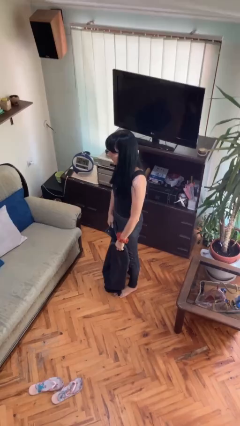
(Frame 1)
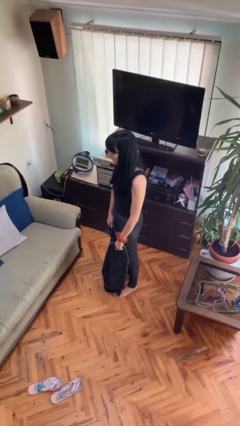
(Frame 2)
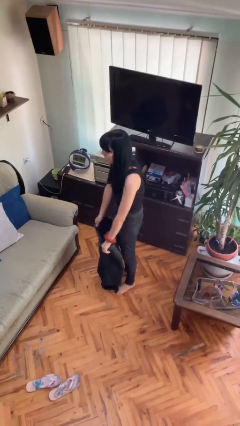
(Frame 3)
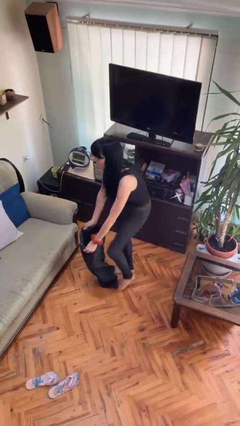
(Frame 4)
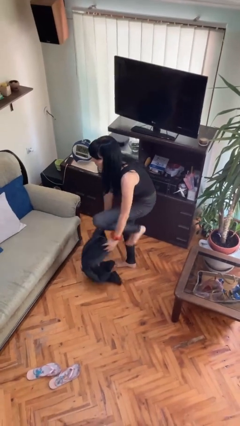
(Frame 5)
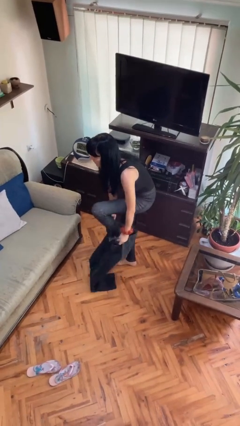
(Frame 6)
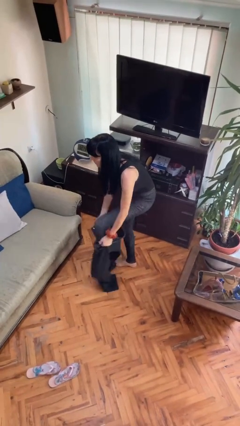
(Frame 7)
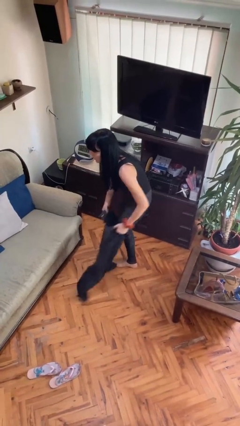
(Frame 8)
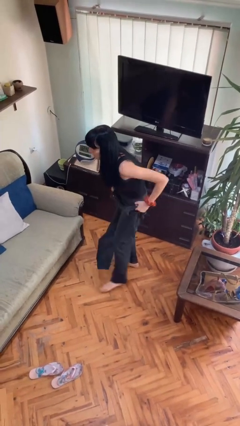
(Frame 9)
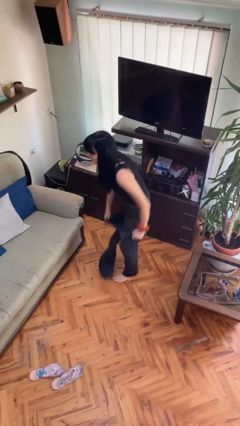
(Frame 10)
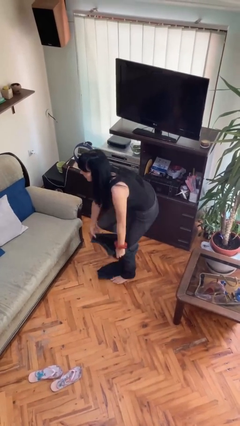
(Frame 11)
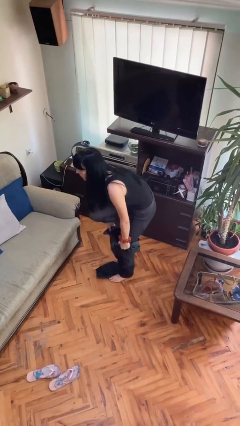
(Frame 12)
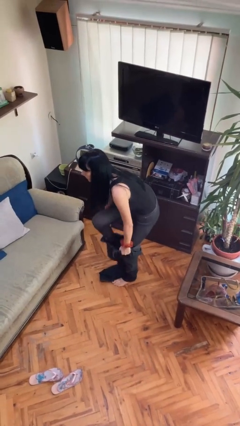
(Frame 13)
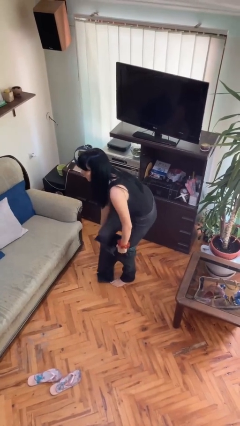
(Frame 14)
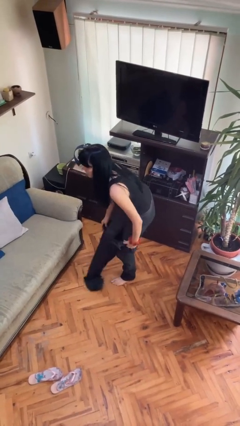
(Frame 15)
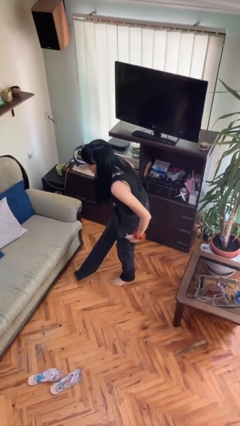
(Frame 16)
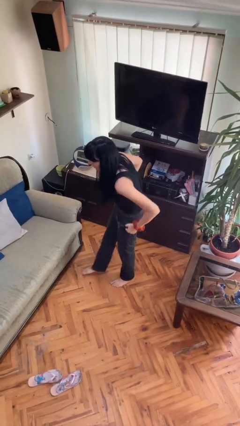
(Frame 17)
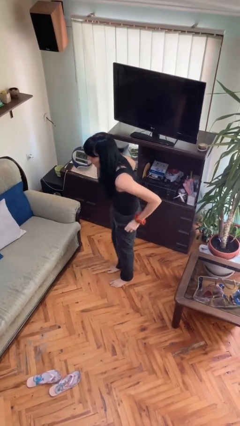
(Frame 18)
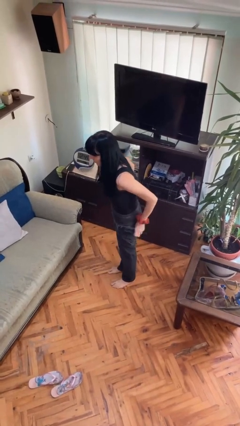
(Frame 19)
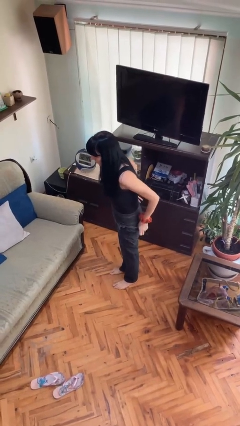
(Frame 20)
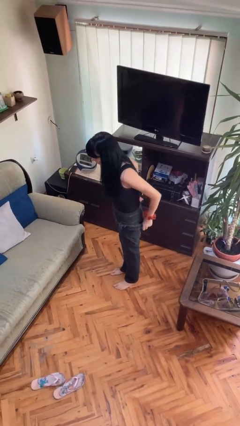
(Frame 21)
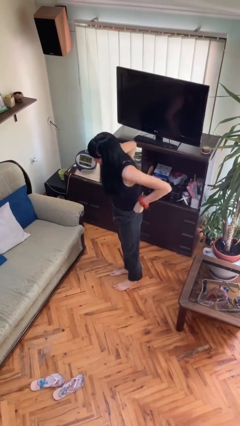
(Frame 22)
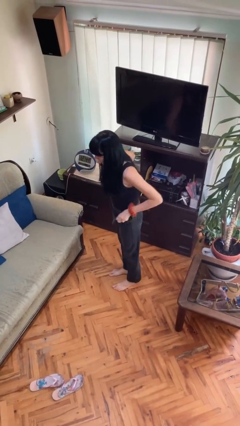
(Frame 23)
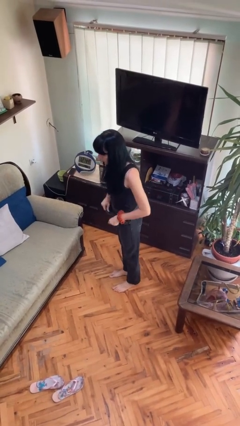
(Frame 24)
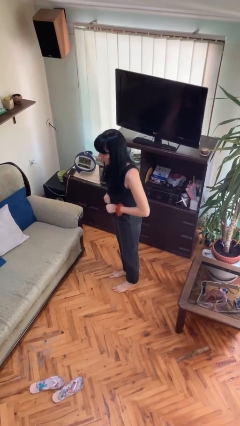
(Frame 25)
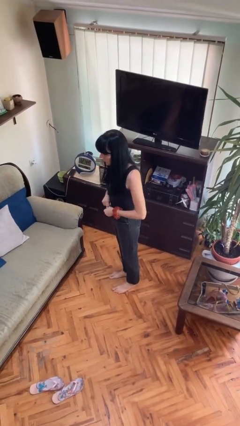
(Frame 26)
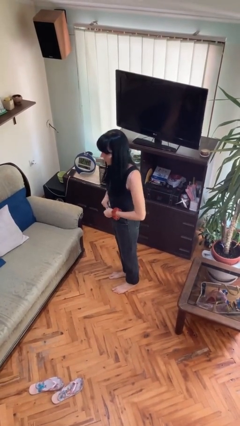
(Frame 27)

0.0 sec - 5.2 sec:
person puts on pants

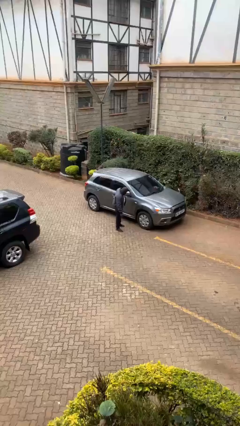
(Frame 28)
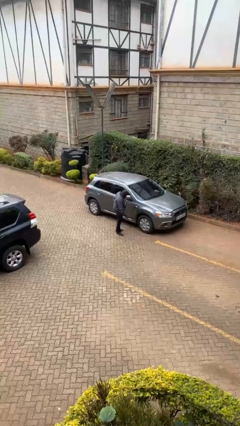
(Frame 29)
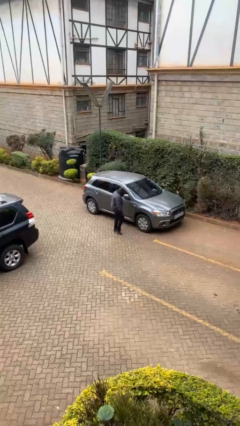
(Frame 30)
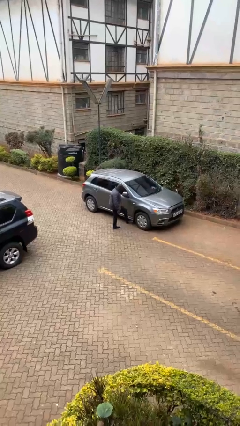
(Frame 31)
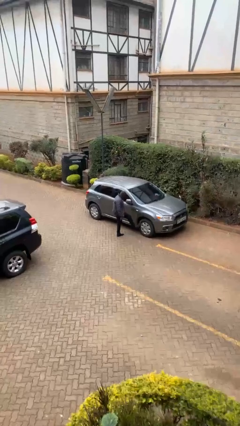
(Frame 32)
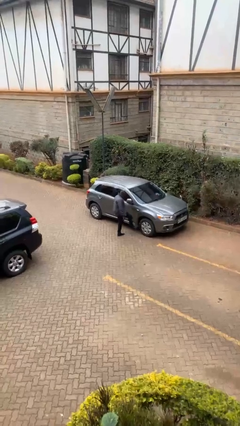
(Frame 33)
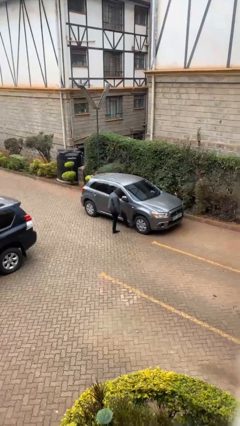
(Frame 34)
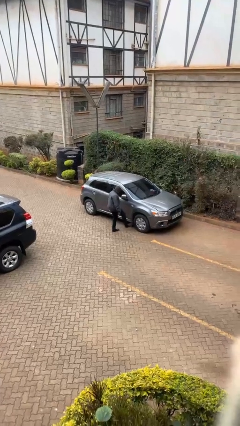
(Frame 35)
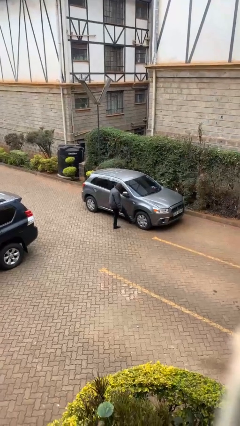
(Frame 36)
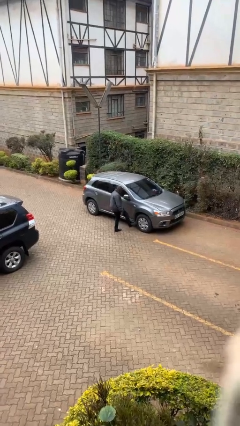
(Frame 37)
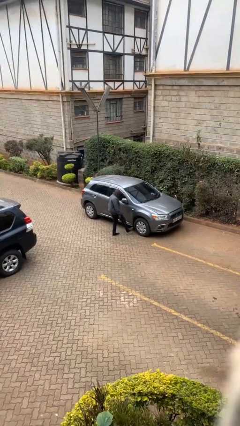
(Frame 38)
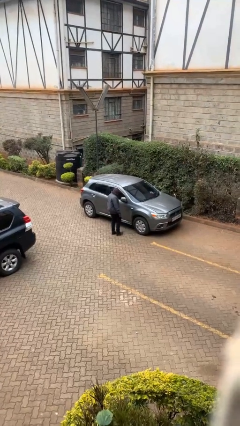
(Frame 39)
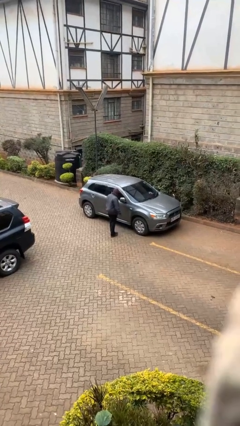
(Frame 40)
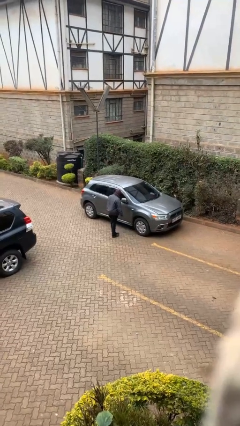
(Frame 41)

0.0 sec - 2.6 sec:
person kicks car tires

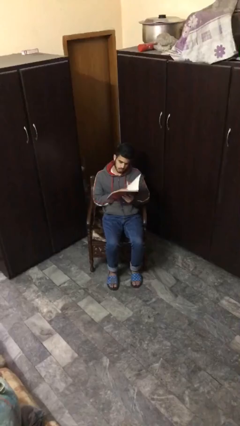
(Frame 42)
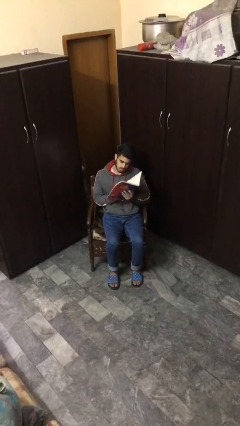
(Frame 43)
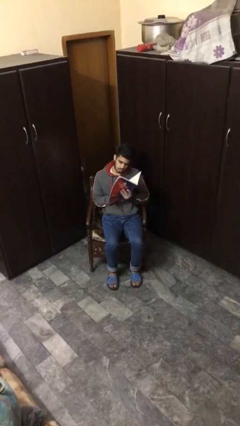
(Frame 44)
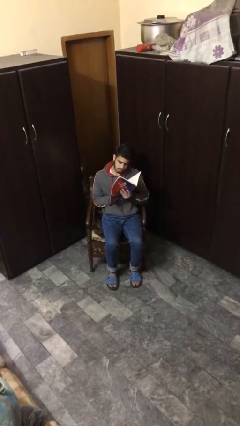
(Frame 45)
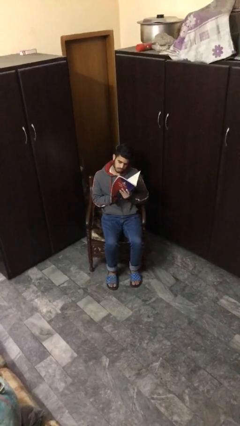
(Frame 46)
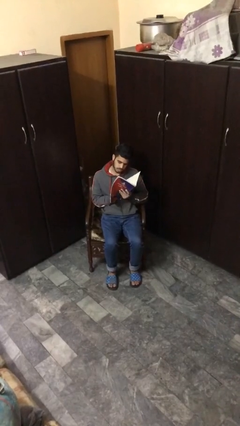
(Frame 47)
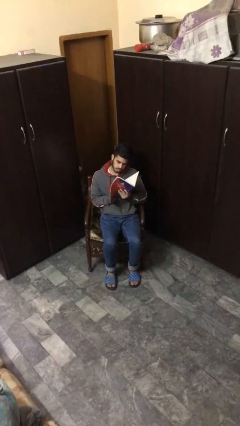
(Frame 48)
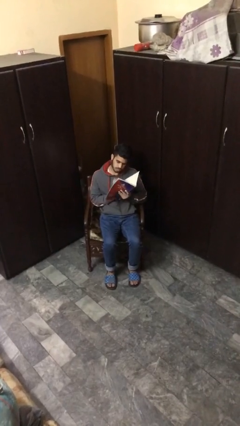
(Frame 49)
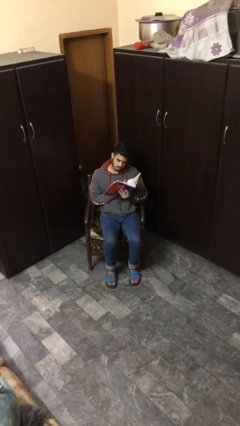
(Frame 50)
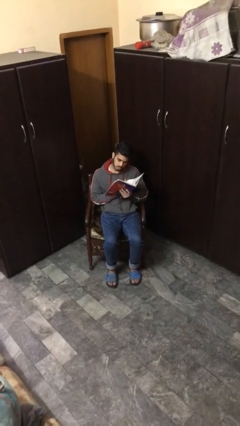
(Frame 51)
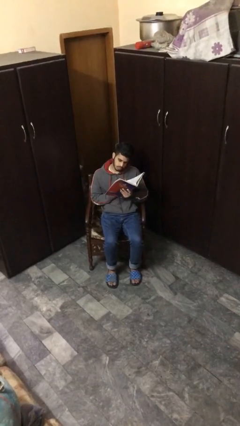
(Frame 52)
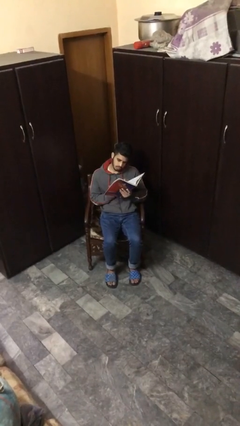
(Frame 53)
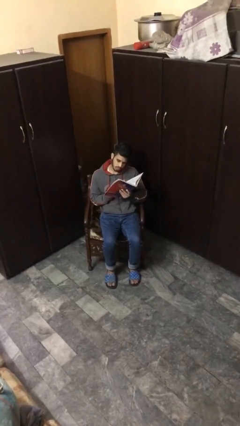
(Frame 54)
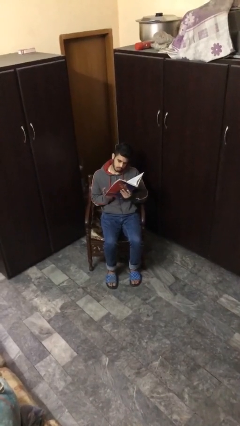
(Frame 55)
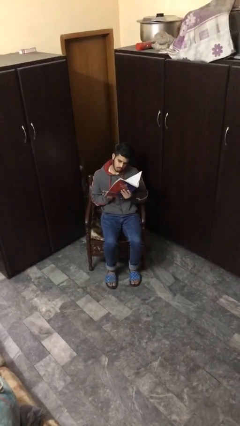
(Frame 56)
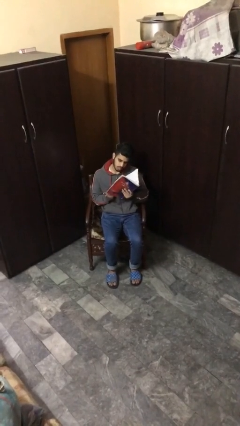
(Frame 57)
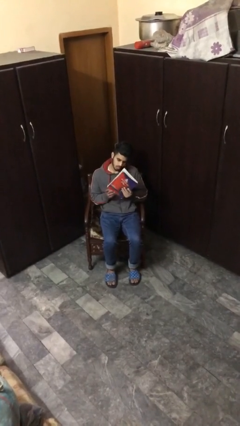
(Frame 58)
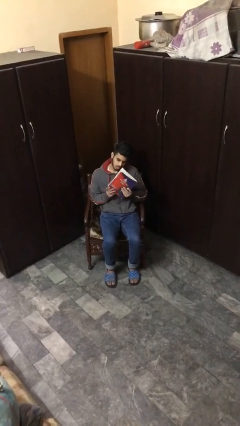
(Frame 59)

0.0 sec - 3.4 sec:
person reads document

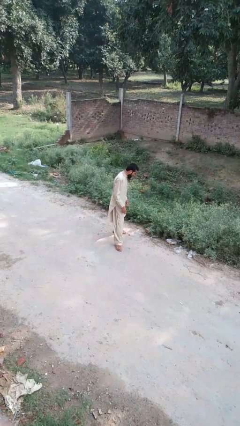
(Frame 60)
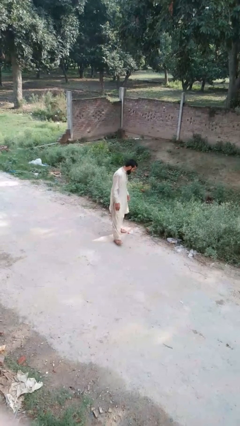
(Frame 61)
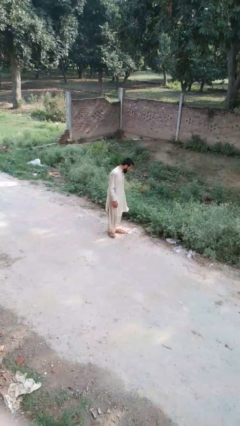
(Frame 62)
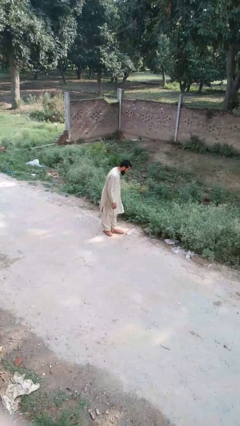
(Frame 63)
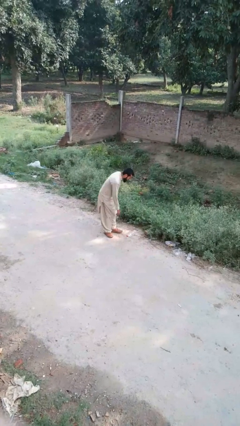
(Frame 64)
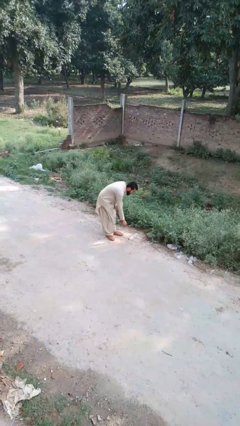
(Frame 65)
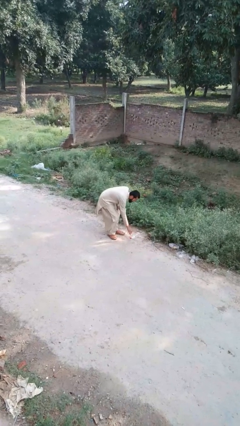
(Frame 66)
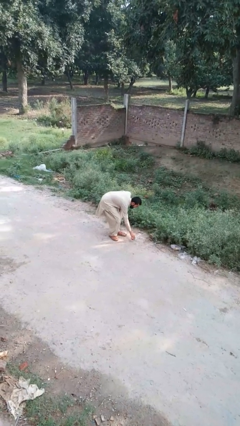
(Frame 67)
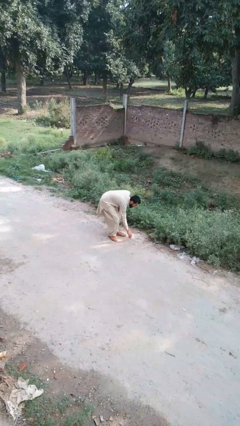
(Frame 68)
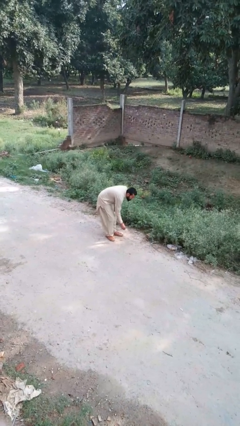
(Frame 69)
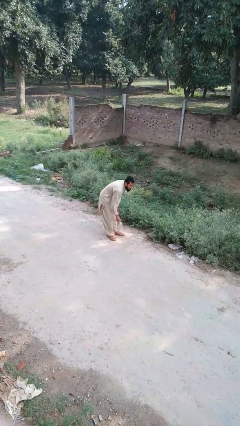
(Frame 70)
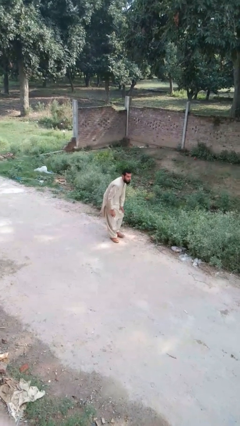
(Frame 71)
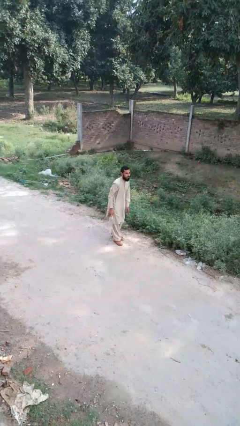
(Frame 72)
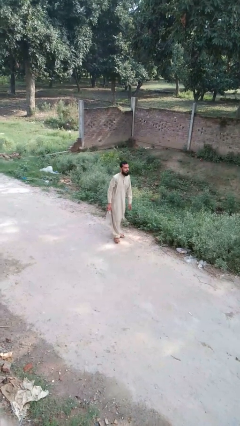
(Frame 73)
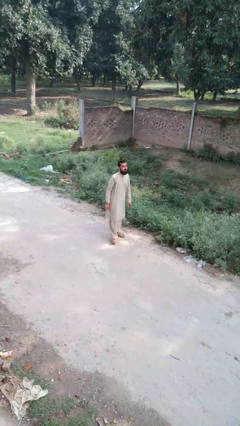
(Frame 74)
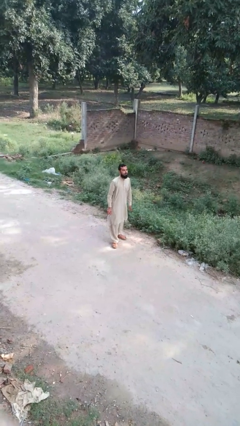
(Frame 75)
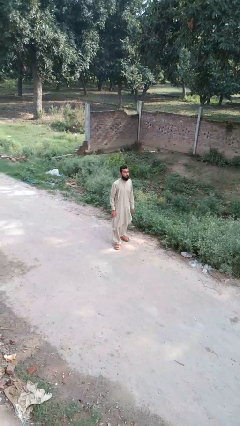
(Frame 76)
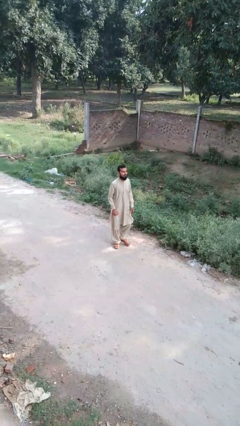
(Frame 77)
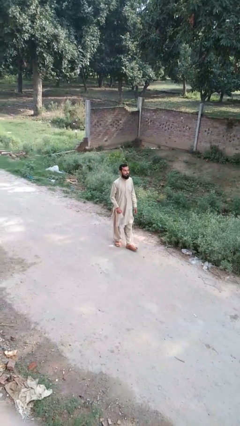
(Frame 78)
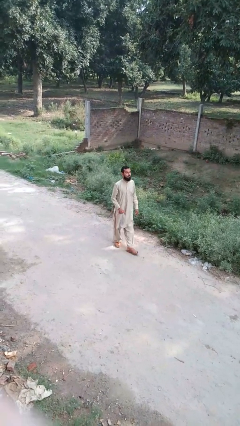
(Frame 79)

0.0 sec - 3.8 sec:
person picks up object from floor

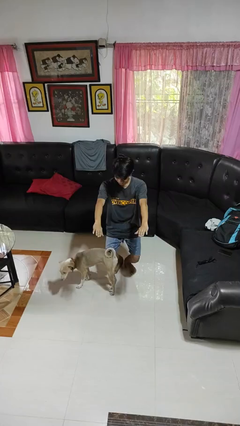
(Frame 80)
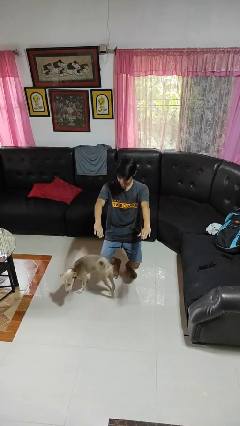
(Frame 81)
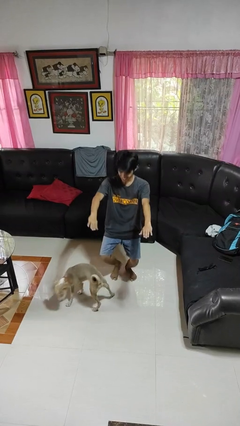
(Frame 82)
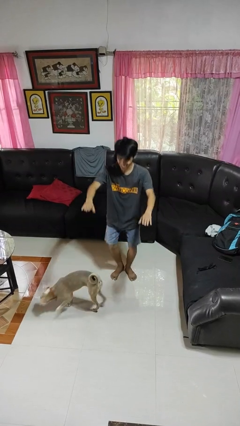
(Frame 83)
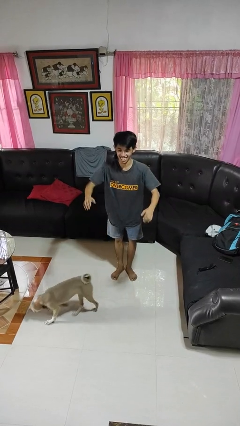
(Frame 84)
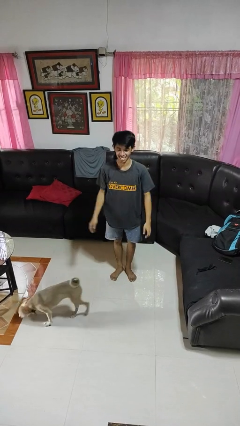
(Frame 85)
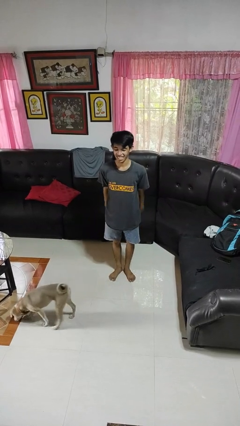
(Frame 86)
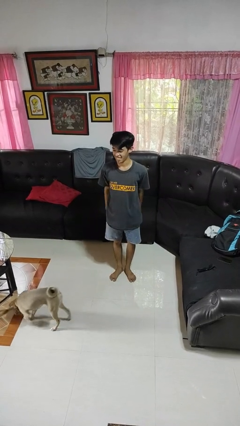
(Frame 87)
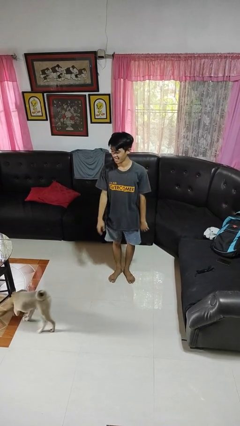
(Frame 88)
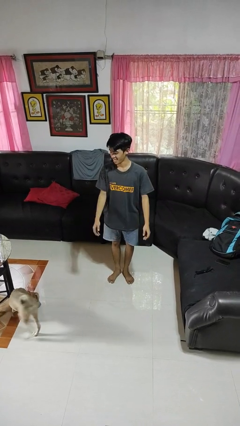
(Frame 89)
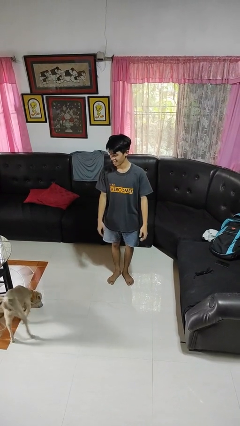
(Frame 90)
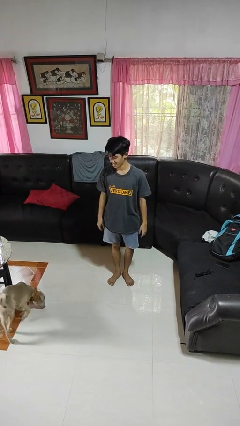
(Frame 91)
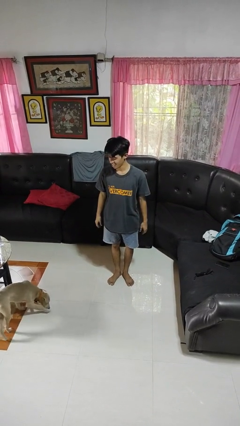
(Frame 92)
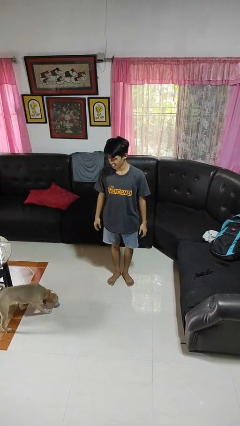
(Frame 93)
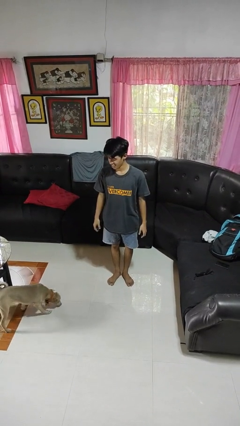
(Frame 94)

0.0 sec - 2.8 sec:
person stands up
